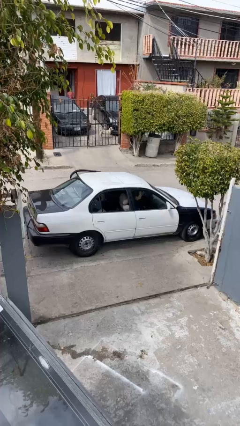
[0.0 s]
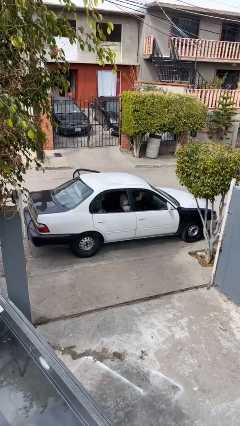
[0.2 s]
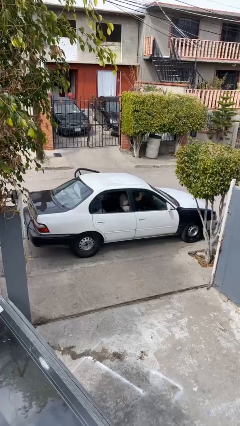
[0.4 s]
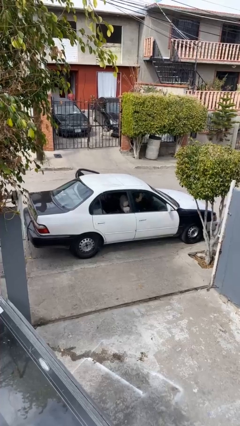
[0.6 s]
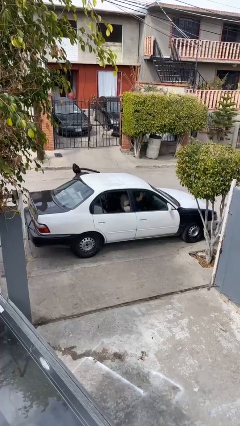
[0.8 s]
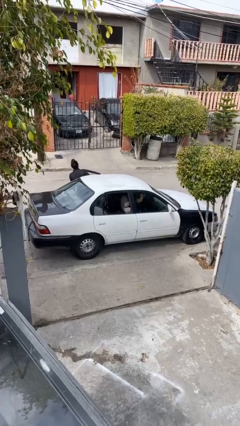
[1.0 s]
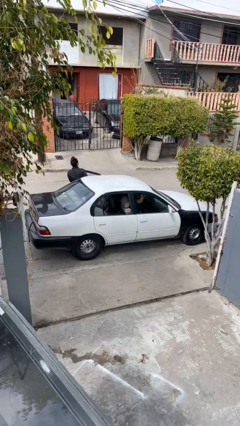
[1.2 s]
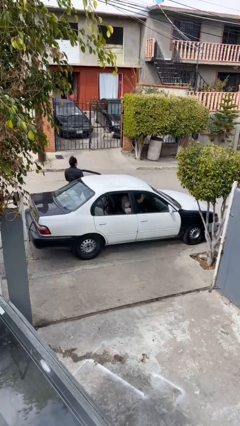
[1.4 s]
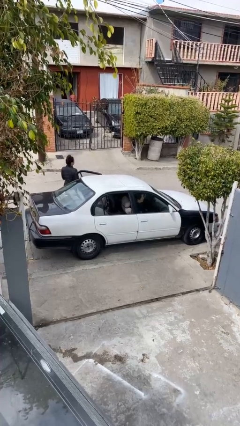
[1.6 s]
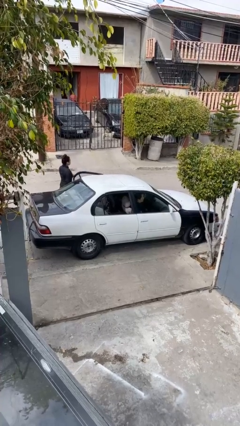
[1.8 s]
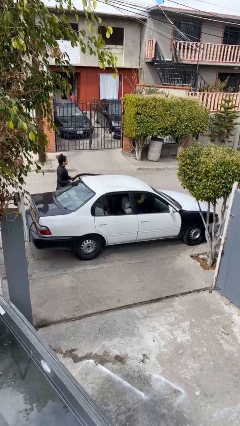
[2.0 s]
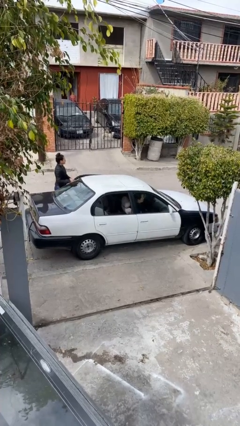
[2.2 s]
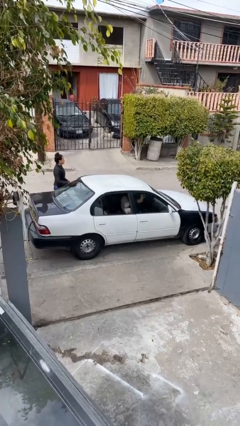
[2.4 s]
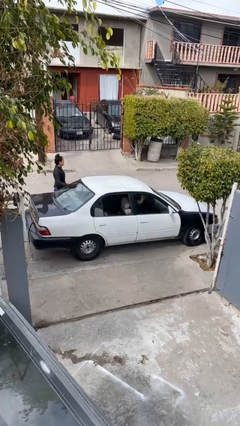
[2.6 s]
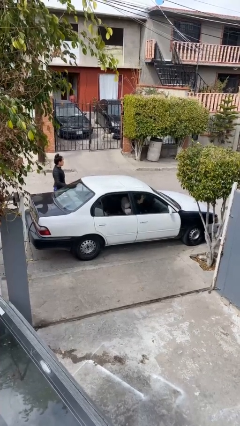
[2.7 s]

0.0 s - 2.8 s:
car drops off person

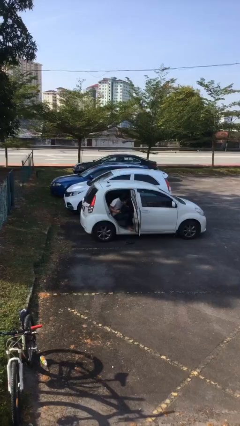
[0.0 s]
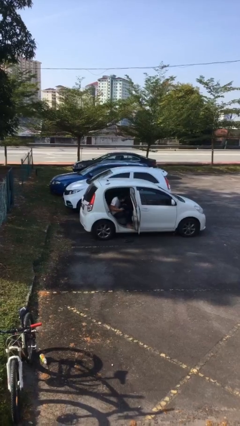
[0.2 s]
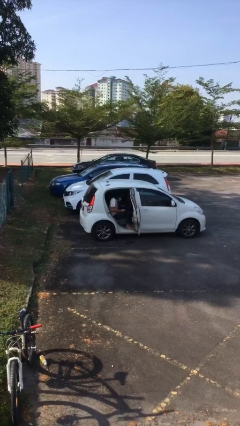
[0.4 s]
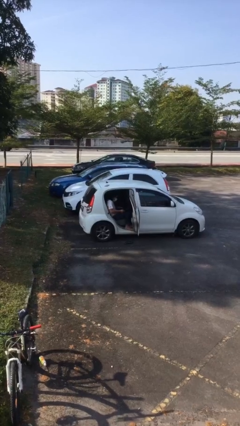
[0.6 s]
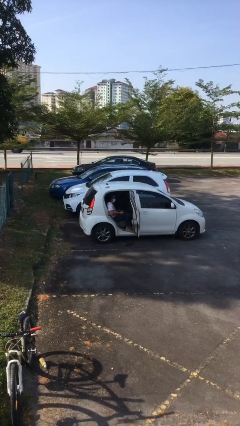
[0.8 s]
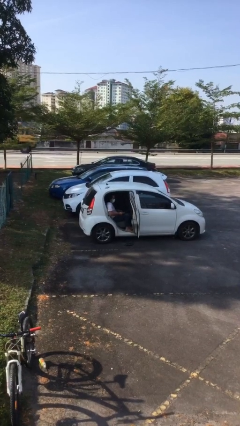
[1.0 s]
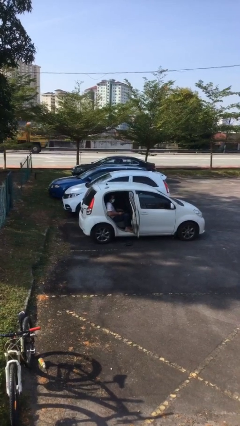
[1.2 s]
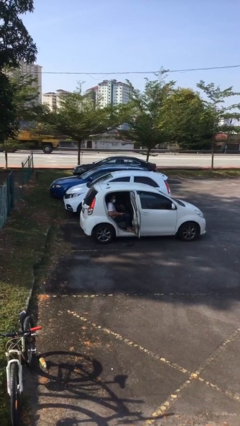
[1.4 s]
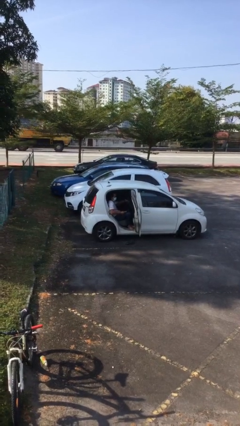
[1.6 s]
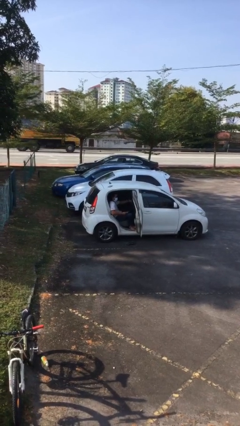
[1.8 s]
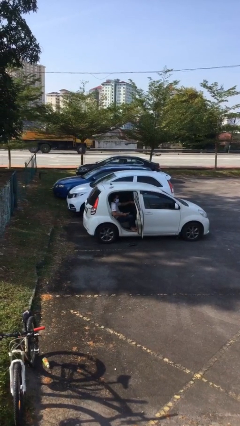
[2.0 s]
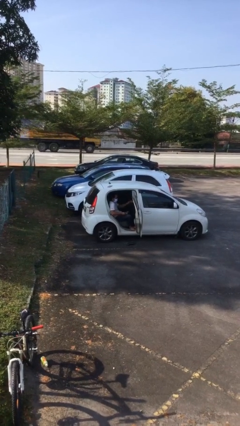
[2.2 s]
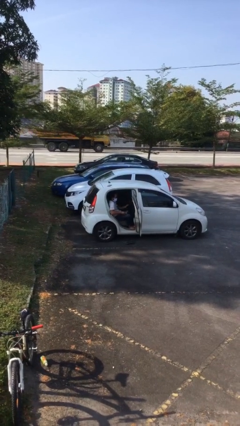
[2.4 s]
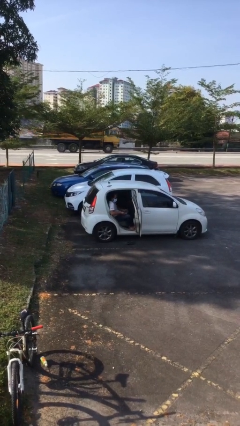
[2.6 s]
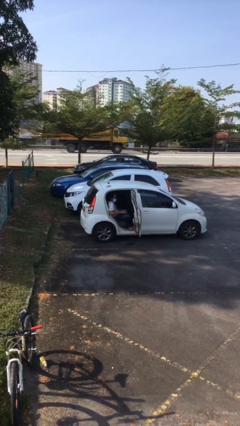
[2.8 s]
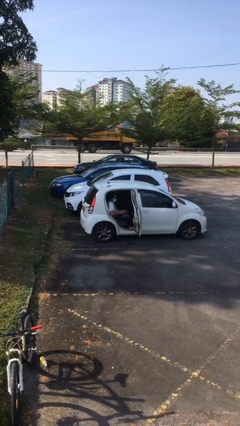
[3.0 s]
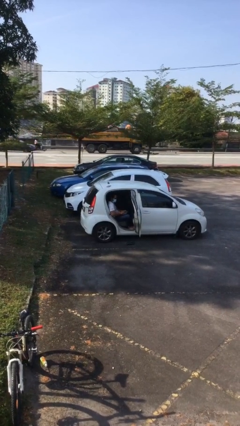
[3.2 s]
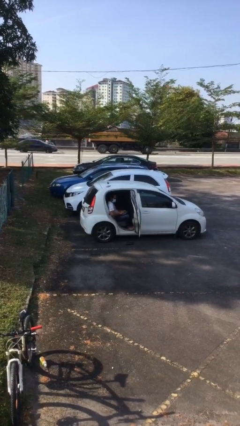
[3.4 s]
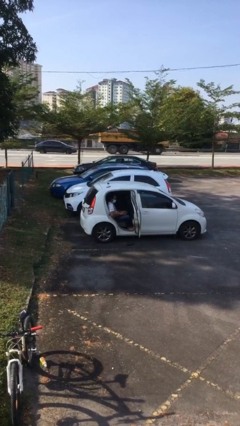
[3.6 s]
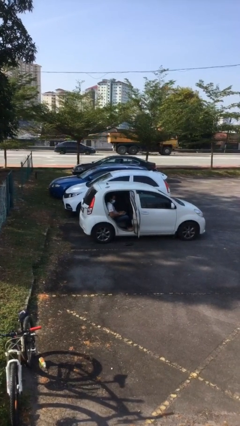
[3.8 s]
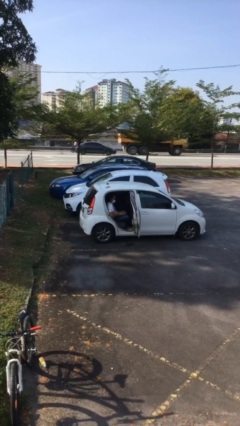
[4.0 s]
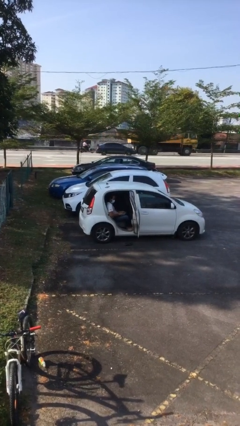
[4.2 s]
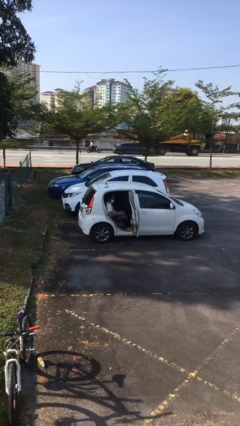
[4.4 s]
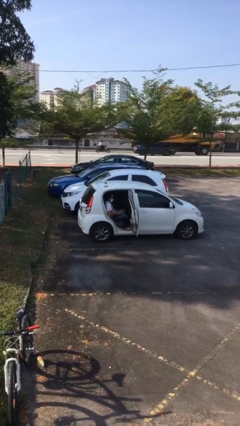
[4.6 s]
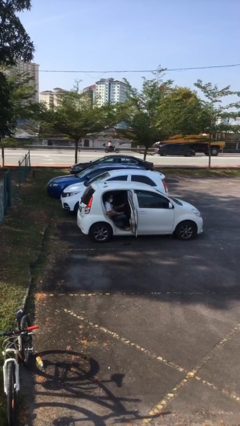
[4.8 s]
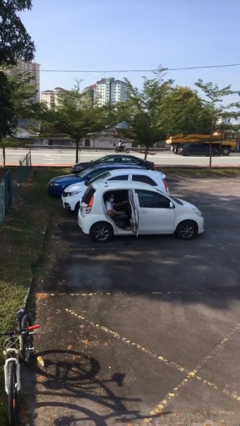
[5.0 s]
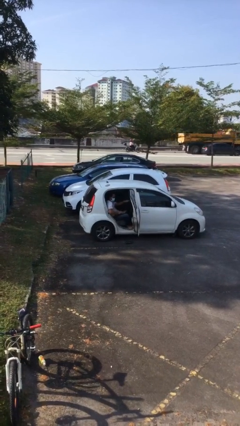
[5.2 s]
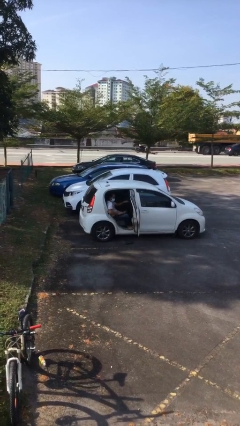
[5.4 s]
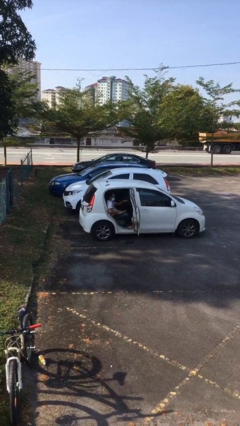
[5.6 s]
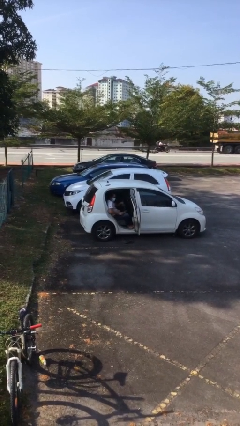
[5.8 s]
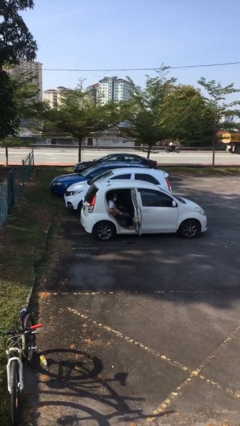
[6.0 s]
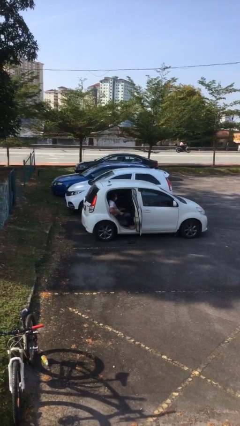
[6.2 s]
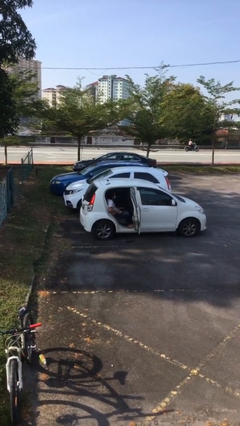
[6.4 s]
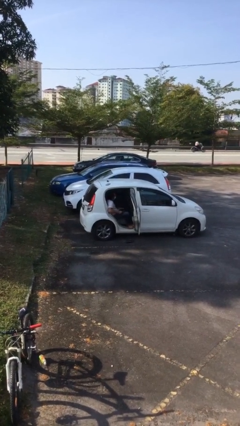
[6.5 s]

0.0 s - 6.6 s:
person interacts with laptop

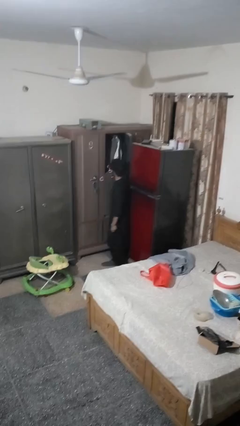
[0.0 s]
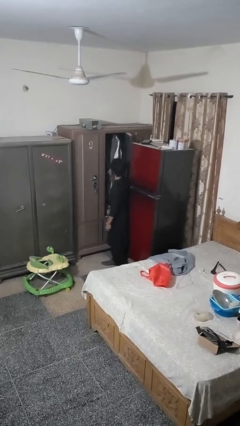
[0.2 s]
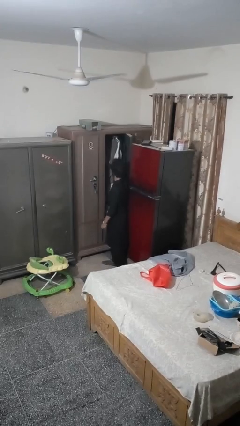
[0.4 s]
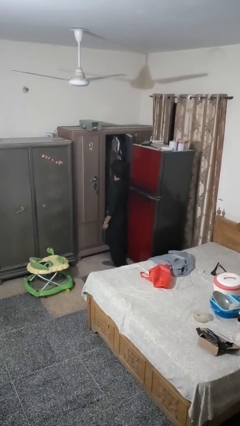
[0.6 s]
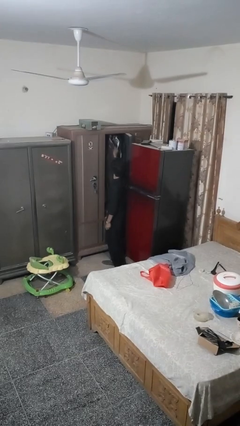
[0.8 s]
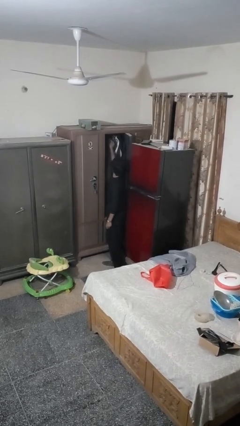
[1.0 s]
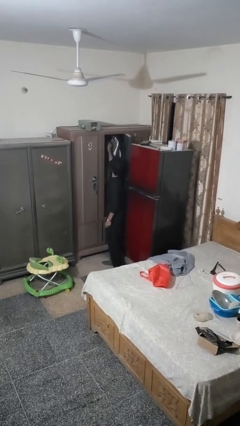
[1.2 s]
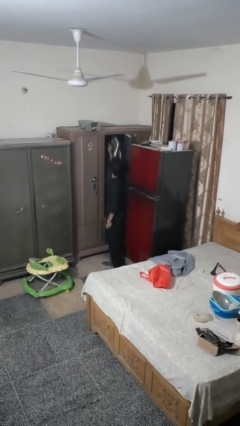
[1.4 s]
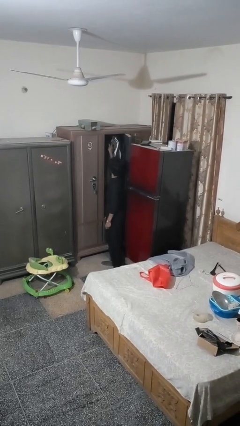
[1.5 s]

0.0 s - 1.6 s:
person puts clothes into closet

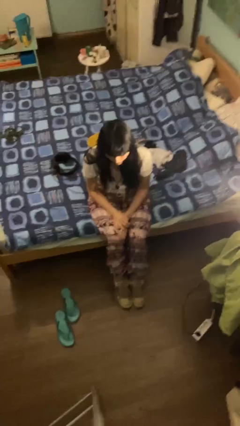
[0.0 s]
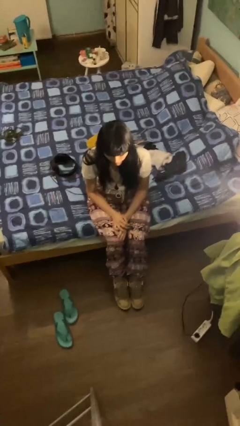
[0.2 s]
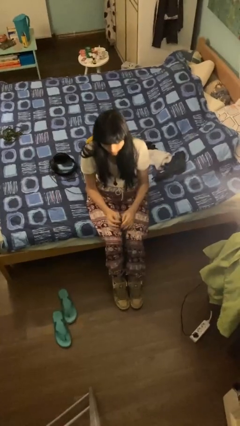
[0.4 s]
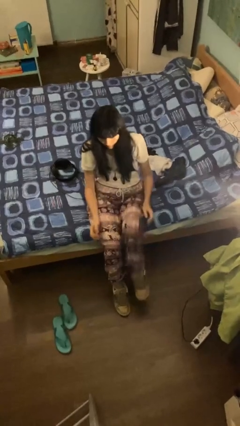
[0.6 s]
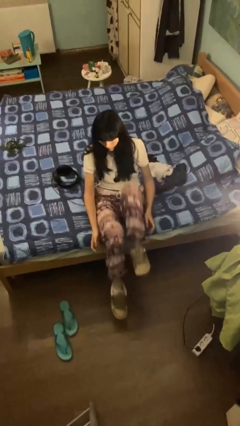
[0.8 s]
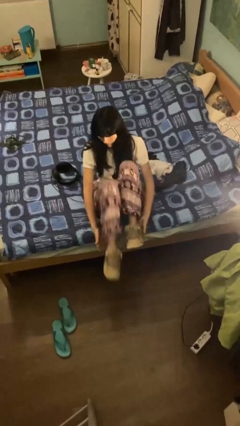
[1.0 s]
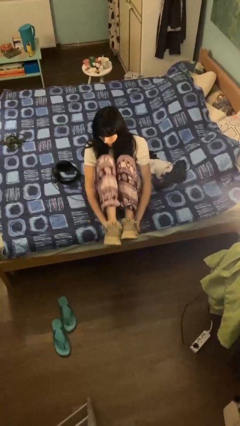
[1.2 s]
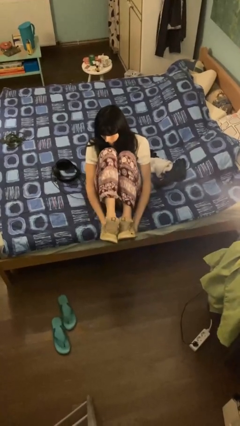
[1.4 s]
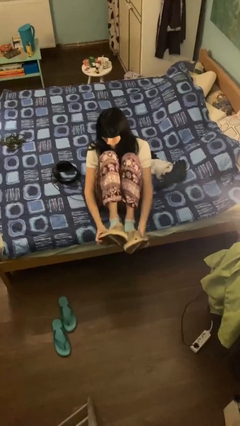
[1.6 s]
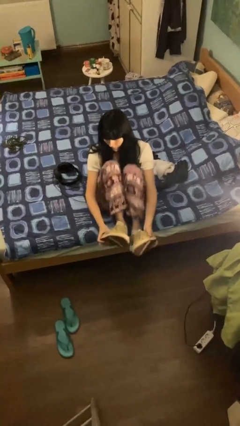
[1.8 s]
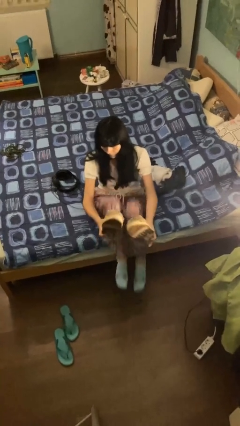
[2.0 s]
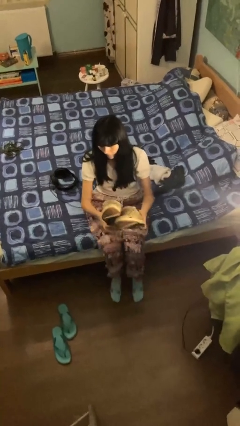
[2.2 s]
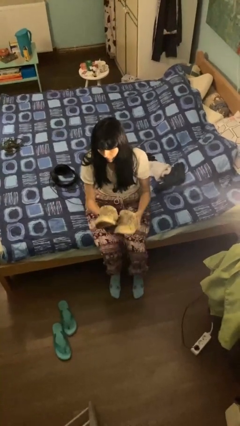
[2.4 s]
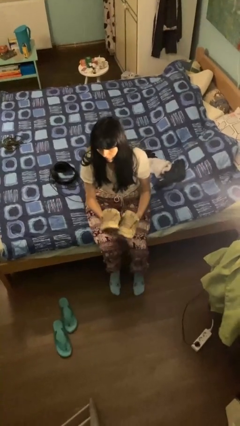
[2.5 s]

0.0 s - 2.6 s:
person takes off shoes

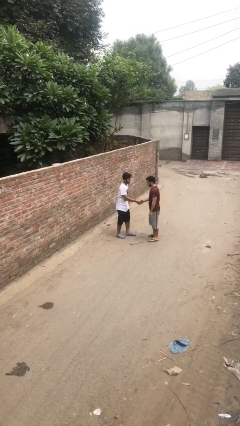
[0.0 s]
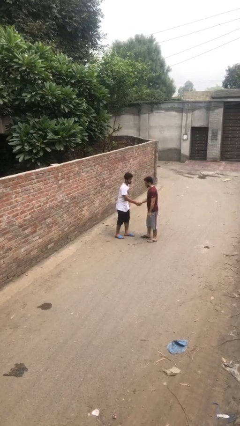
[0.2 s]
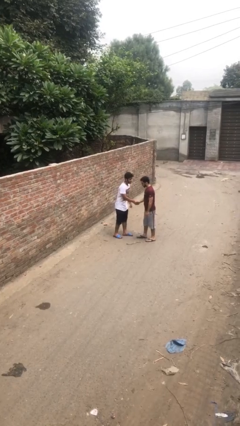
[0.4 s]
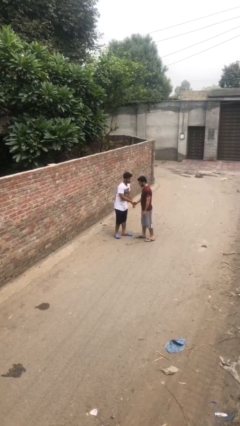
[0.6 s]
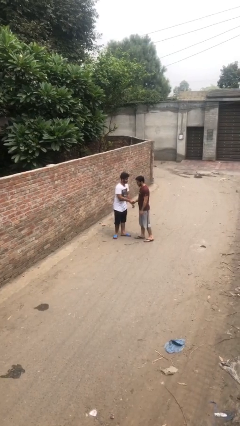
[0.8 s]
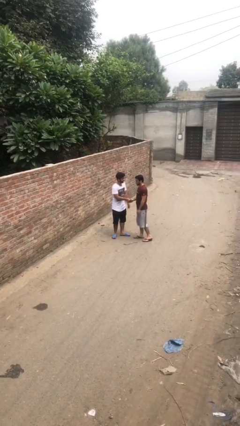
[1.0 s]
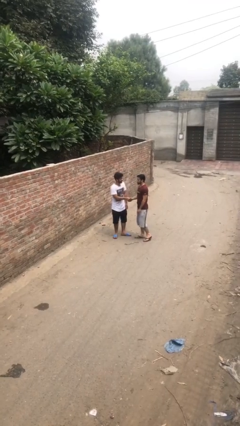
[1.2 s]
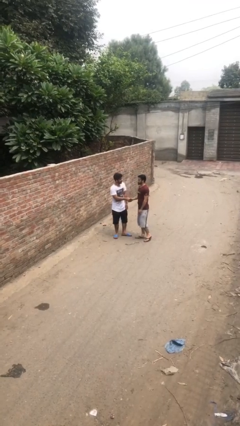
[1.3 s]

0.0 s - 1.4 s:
person shakes hand

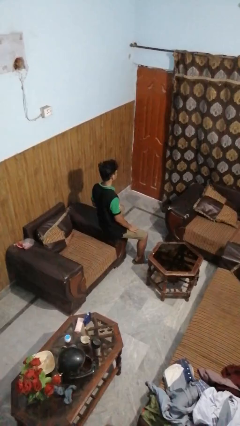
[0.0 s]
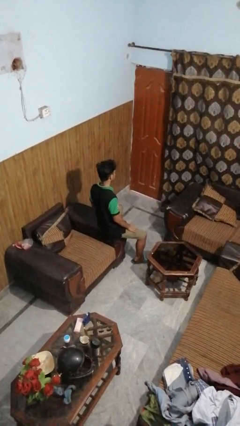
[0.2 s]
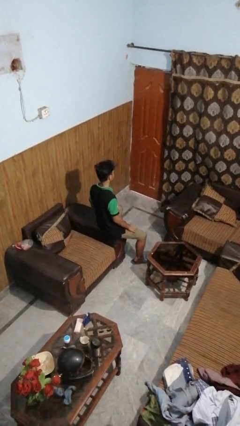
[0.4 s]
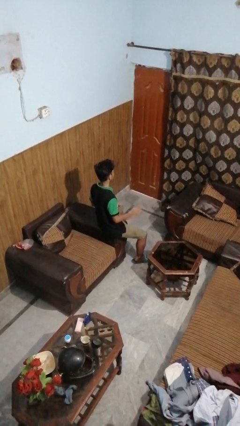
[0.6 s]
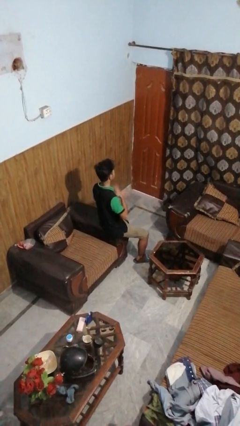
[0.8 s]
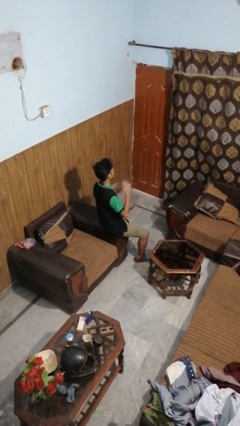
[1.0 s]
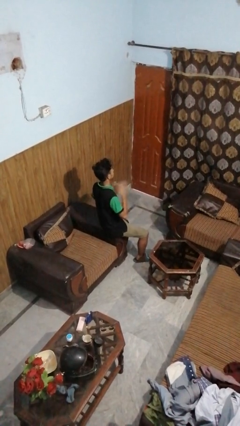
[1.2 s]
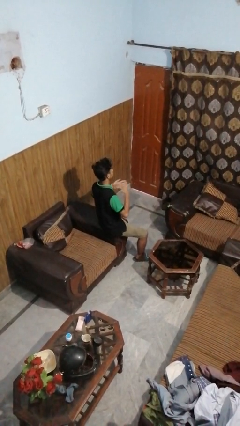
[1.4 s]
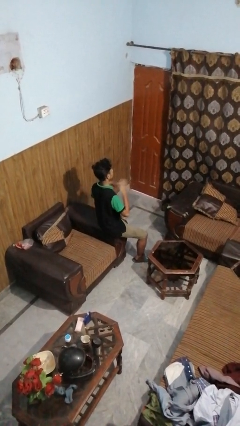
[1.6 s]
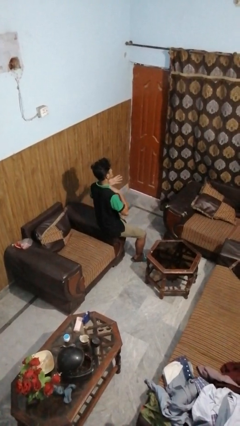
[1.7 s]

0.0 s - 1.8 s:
person drums on chest

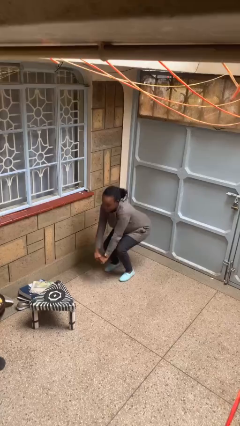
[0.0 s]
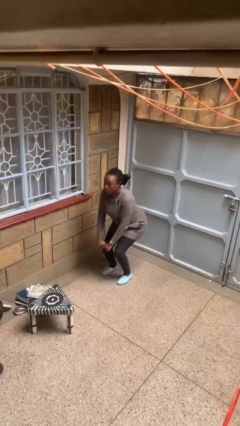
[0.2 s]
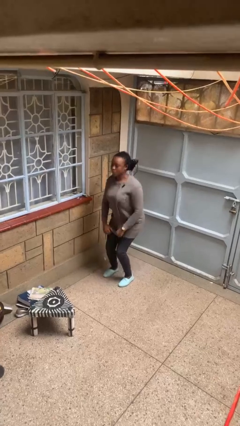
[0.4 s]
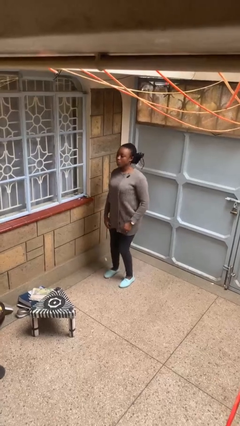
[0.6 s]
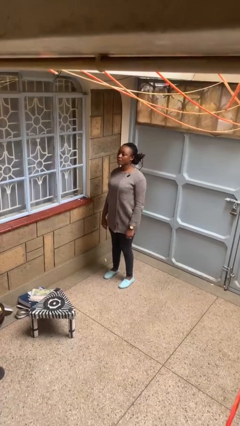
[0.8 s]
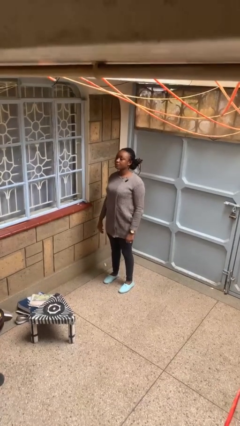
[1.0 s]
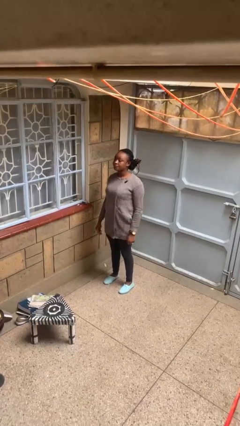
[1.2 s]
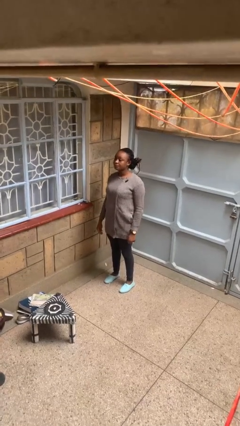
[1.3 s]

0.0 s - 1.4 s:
person stands up
